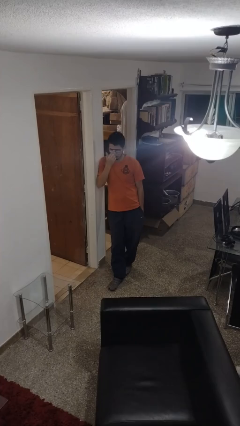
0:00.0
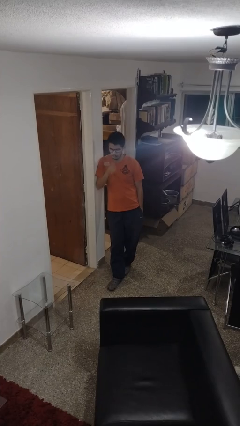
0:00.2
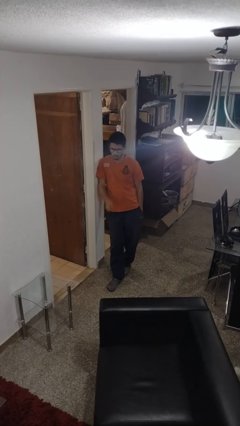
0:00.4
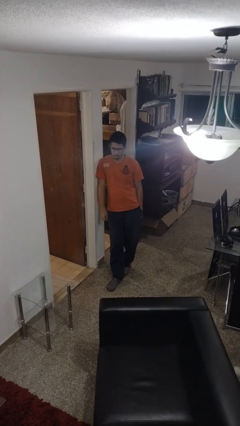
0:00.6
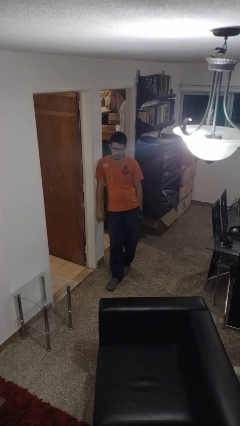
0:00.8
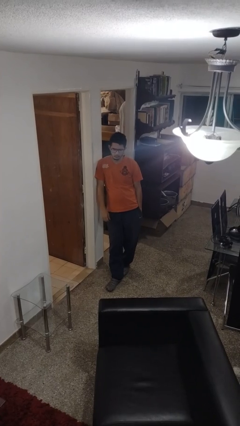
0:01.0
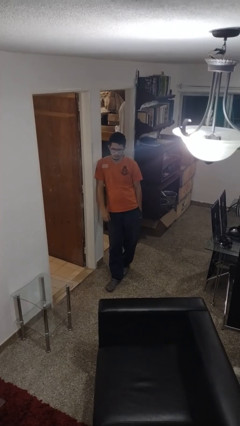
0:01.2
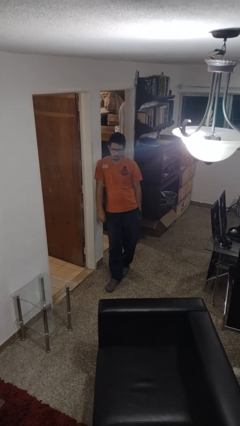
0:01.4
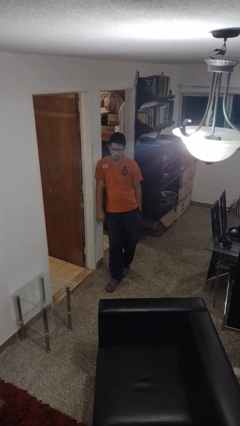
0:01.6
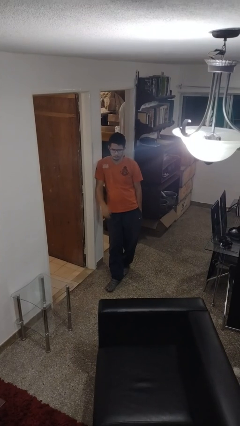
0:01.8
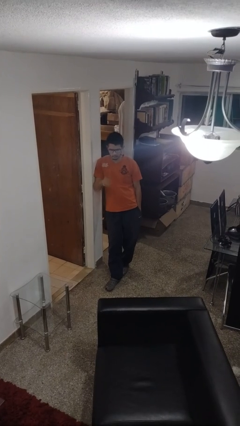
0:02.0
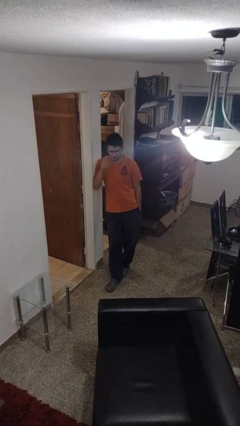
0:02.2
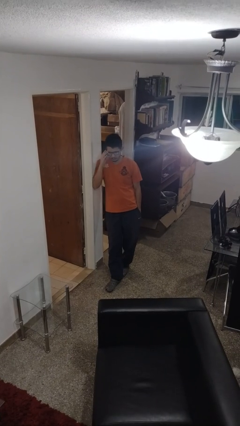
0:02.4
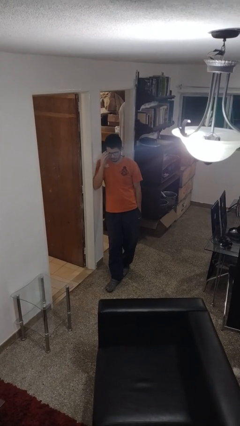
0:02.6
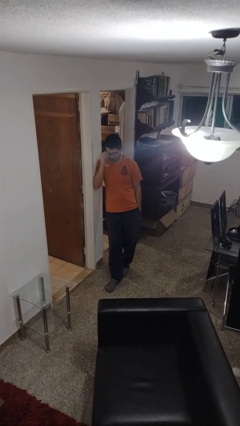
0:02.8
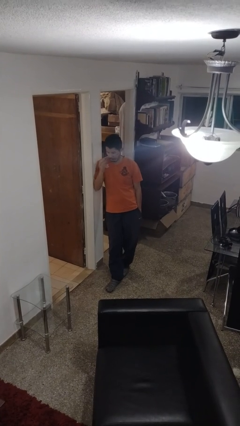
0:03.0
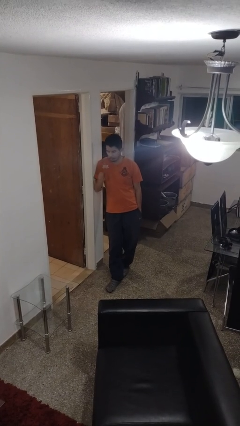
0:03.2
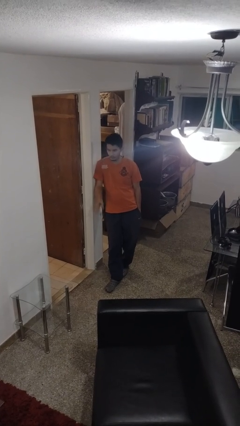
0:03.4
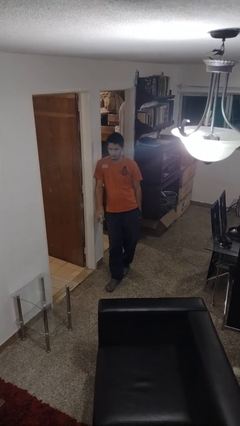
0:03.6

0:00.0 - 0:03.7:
person takes off glasses

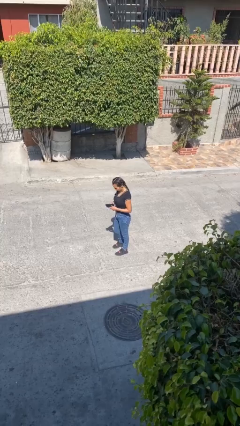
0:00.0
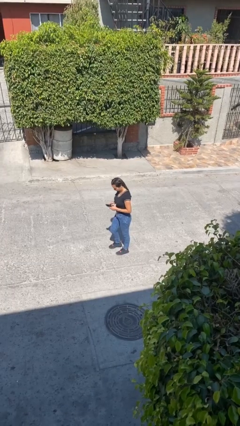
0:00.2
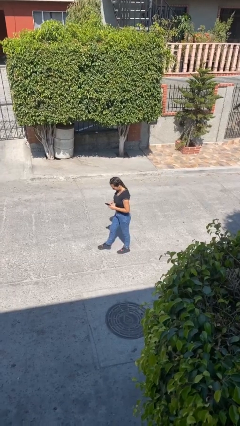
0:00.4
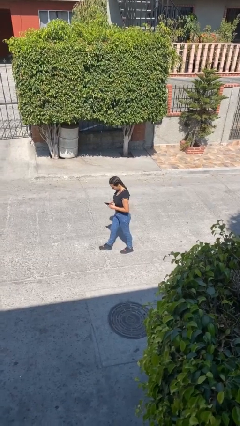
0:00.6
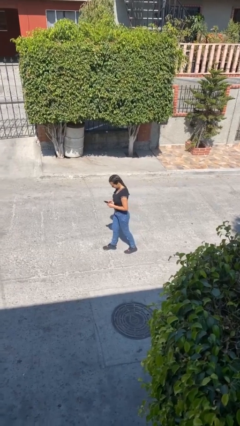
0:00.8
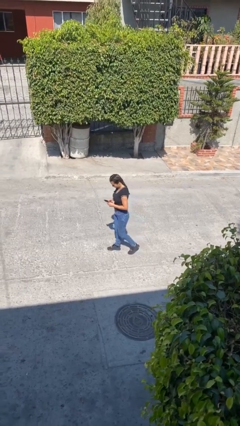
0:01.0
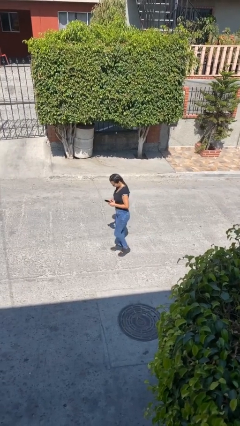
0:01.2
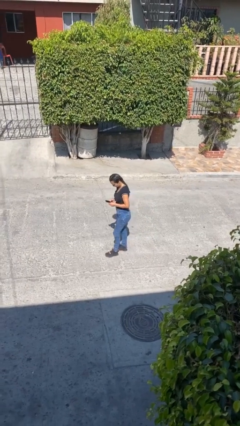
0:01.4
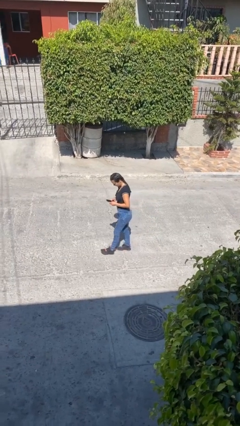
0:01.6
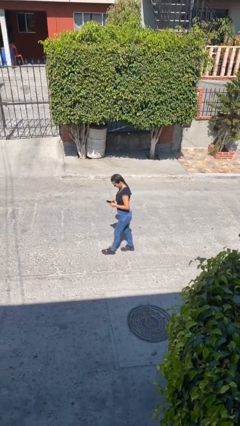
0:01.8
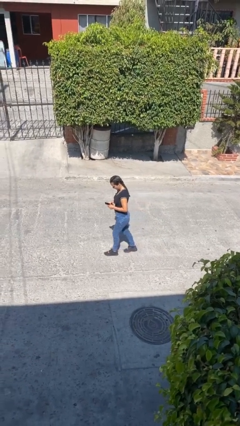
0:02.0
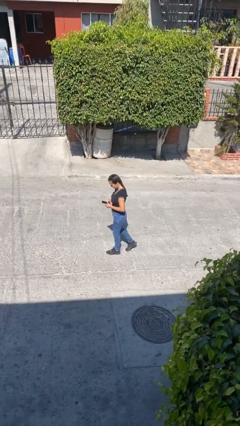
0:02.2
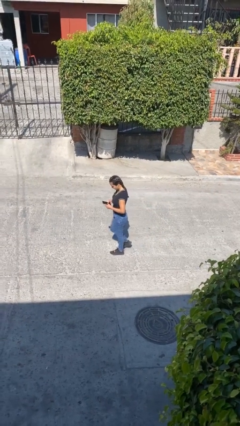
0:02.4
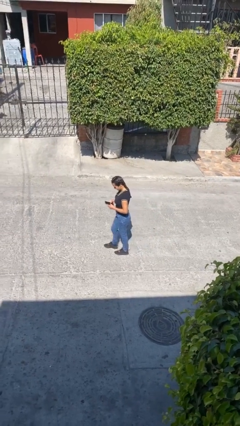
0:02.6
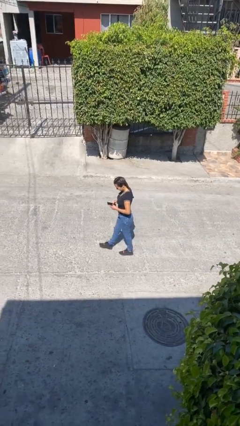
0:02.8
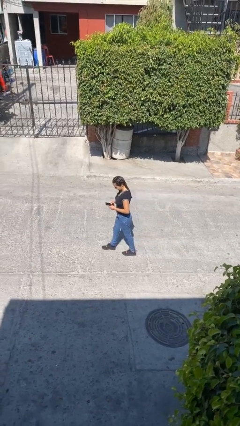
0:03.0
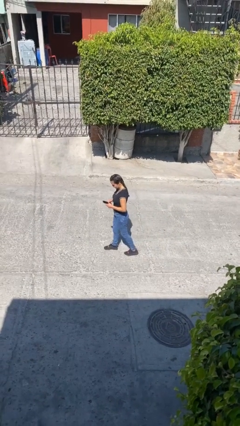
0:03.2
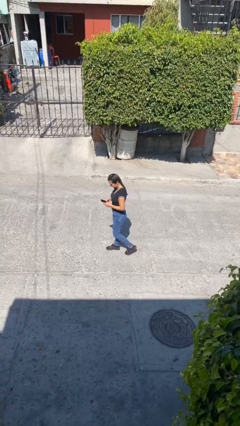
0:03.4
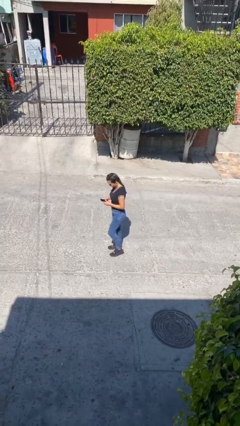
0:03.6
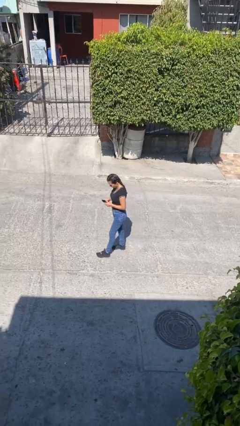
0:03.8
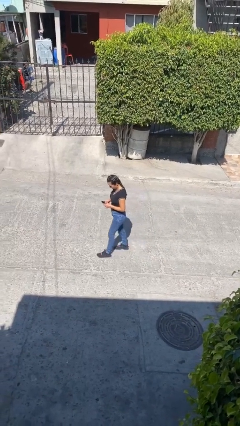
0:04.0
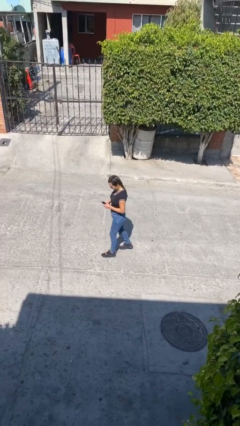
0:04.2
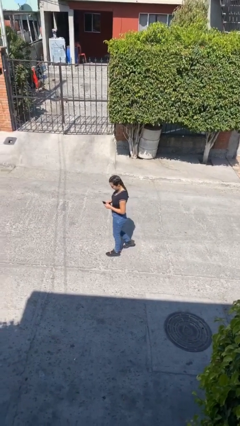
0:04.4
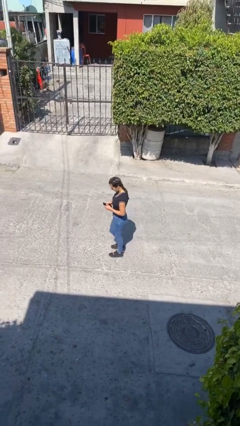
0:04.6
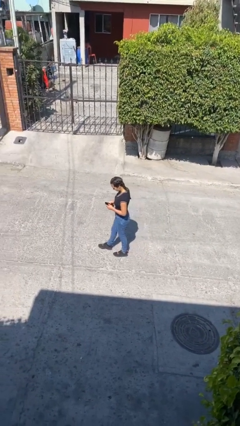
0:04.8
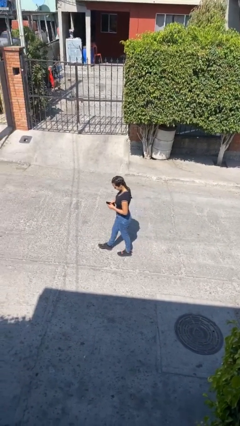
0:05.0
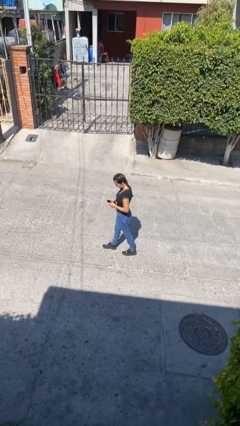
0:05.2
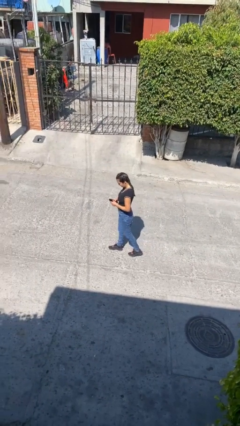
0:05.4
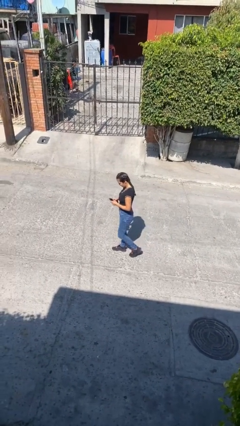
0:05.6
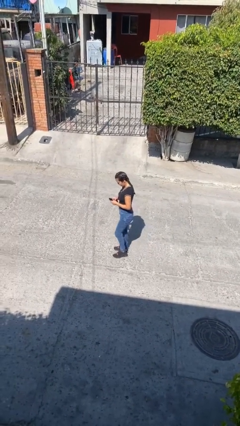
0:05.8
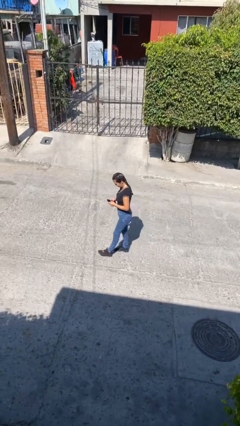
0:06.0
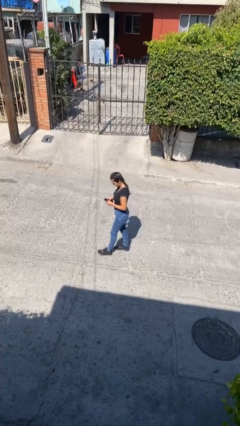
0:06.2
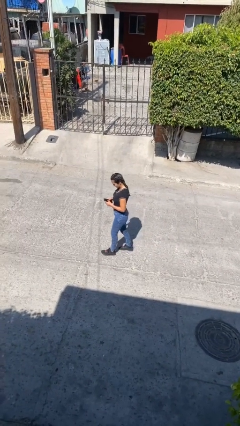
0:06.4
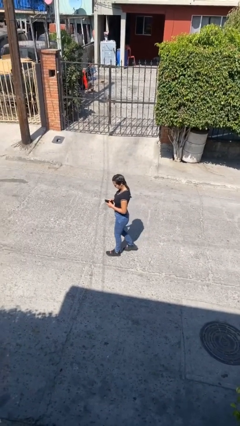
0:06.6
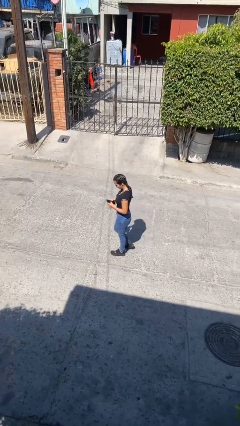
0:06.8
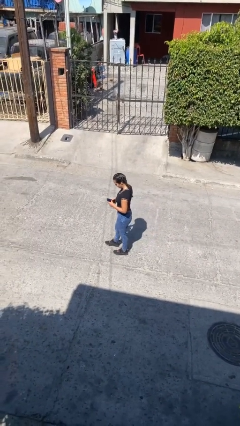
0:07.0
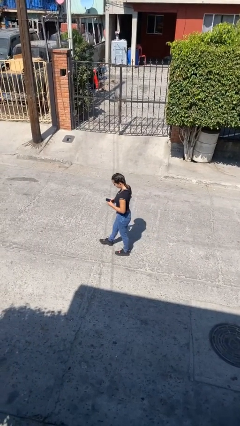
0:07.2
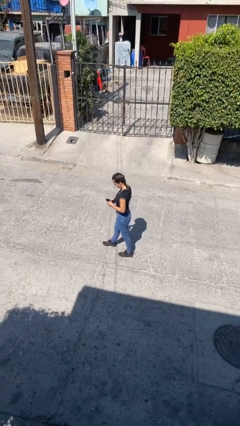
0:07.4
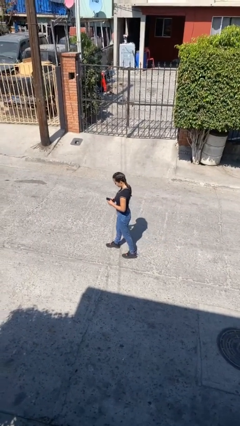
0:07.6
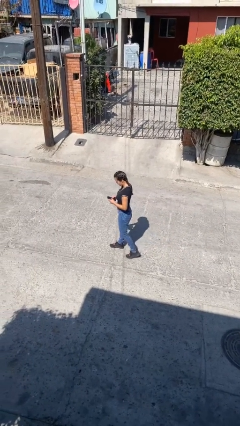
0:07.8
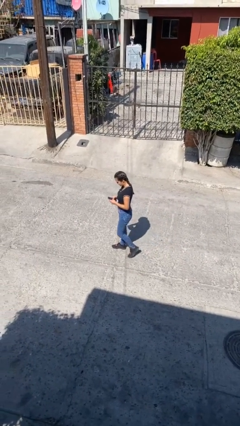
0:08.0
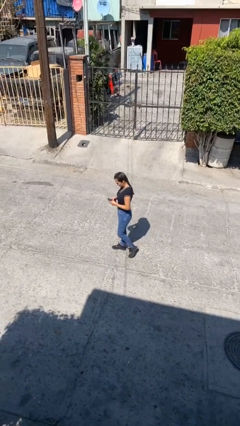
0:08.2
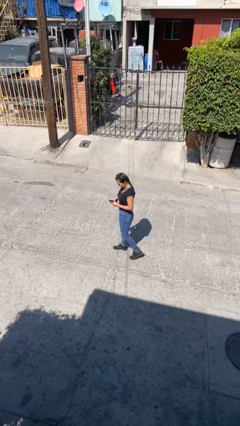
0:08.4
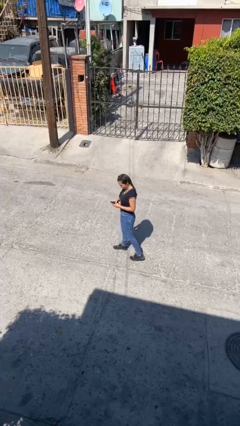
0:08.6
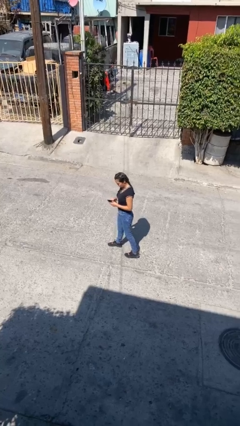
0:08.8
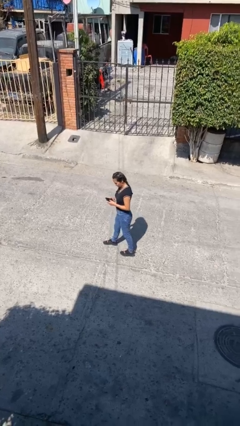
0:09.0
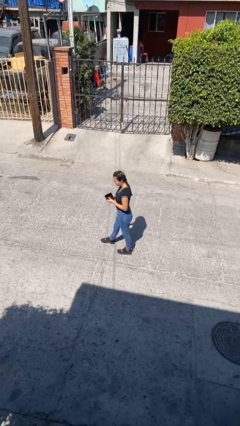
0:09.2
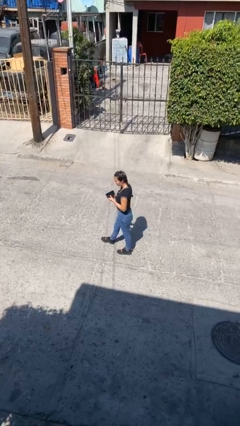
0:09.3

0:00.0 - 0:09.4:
person texts on phone

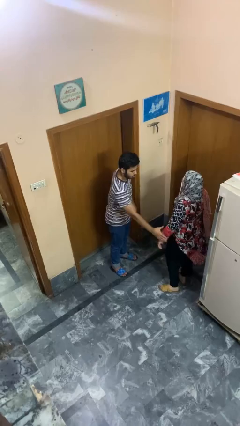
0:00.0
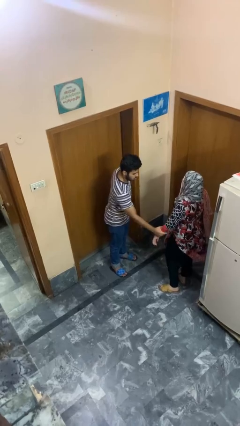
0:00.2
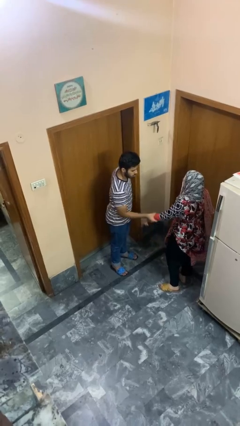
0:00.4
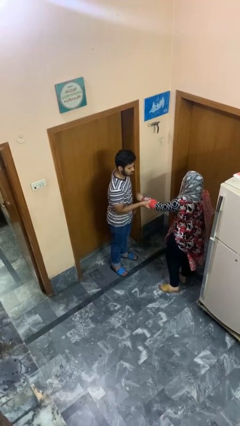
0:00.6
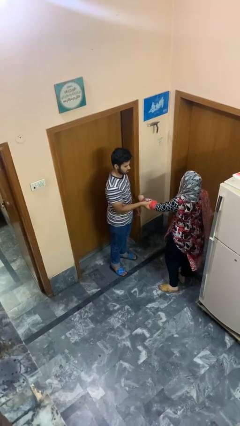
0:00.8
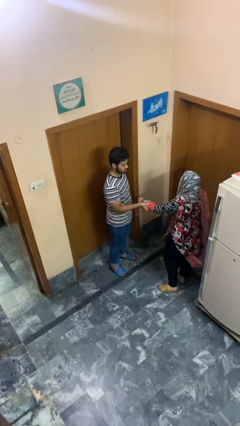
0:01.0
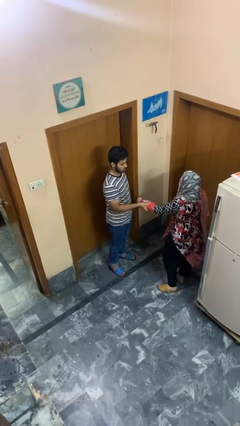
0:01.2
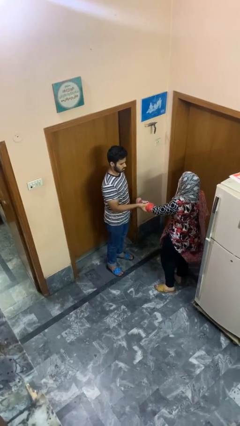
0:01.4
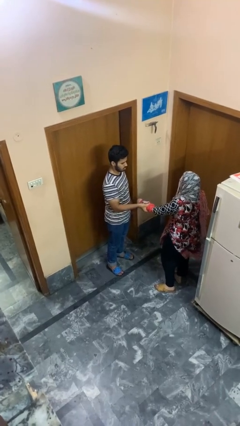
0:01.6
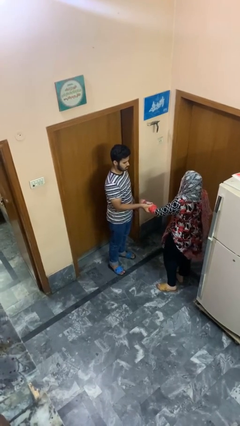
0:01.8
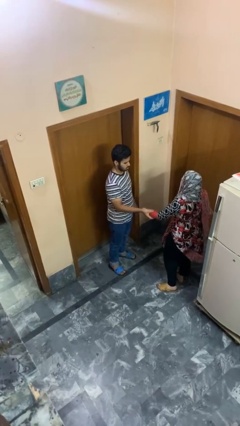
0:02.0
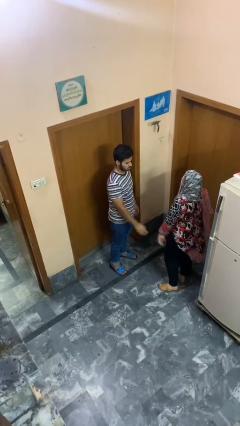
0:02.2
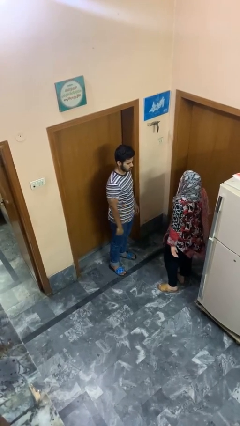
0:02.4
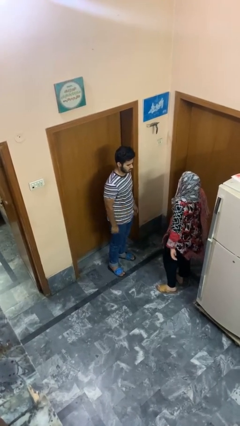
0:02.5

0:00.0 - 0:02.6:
person grabs person by forearm

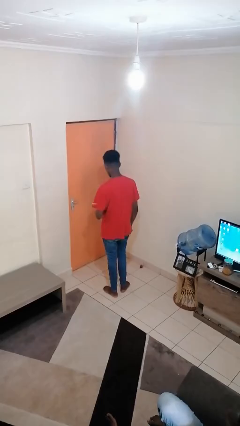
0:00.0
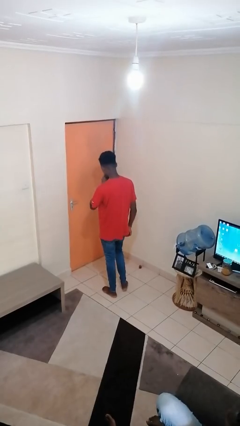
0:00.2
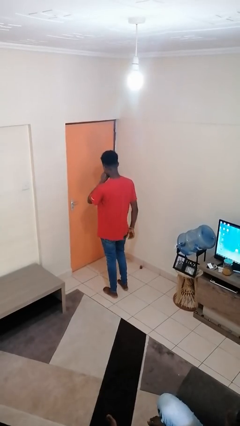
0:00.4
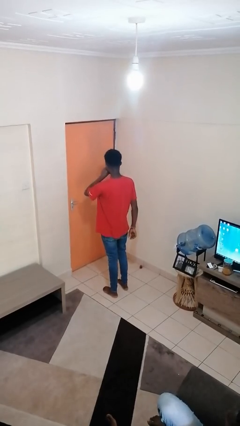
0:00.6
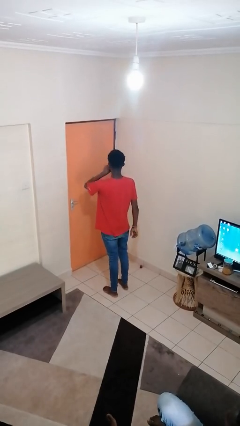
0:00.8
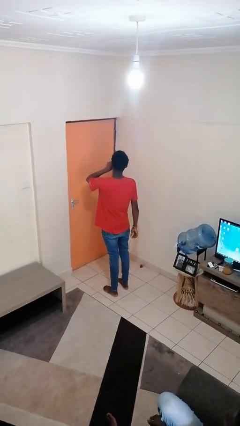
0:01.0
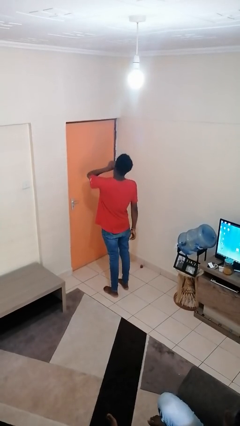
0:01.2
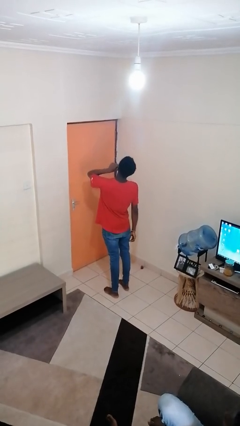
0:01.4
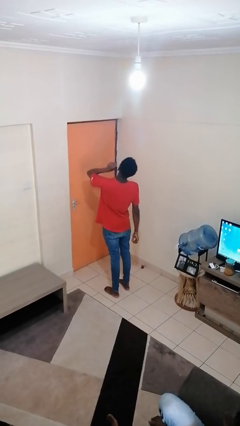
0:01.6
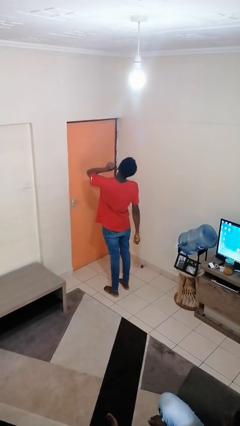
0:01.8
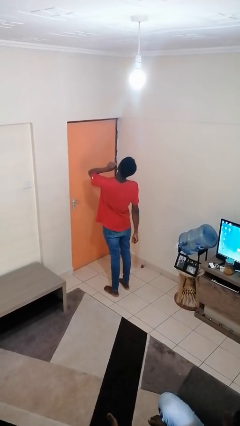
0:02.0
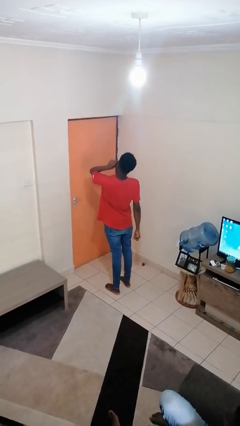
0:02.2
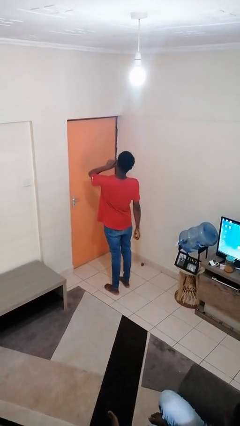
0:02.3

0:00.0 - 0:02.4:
person yawns
